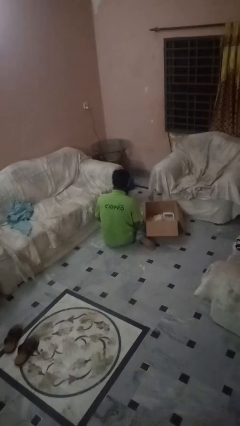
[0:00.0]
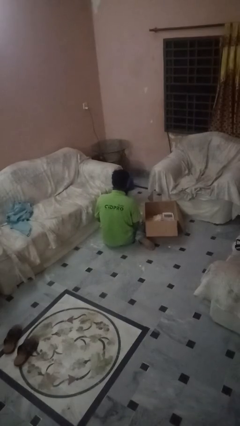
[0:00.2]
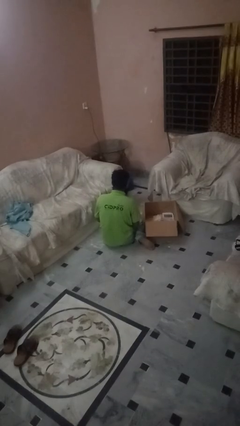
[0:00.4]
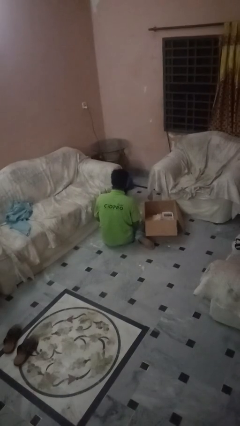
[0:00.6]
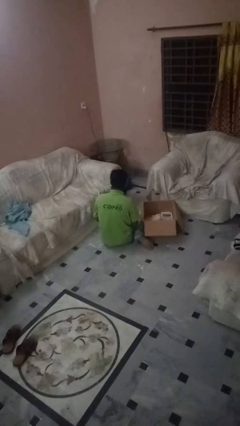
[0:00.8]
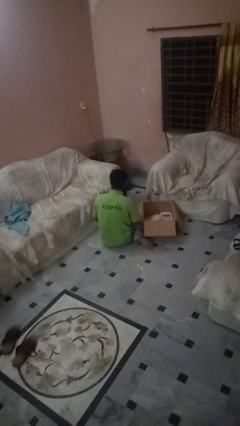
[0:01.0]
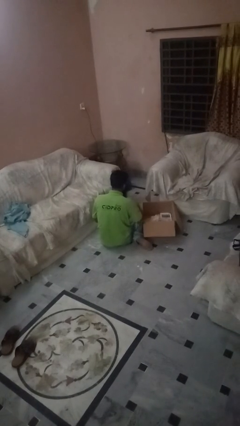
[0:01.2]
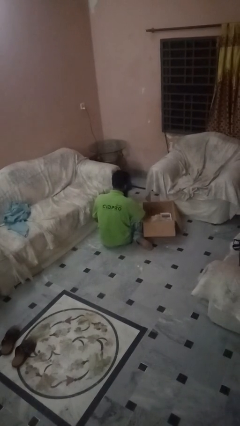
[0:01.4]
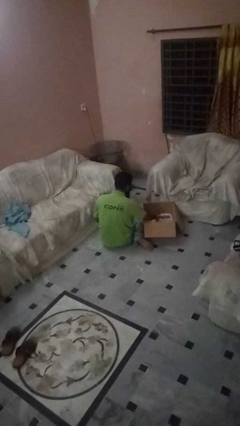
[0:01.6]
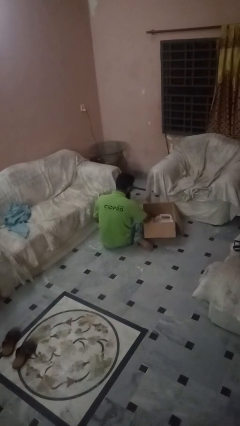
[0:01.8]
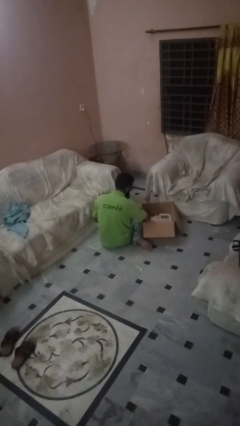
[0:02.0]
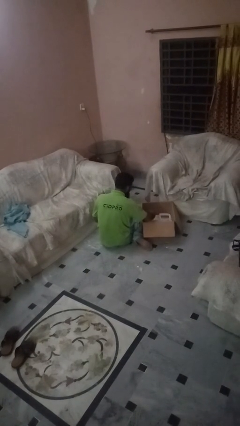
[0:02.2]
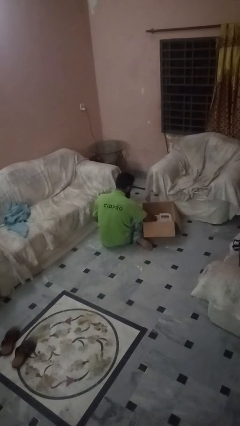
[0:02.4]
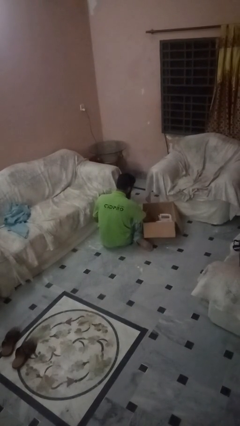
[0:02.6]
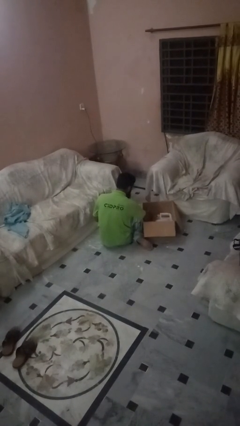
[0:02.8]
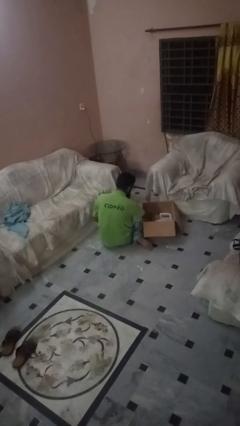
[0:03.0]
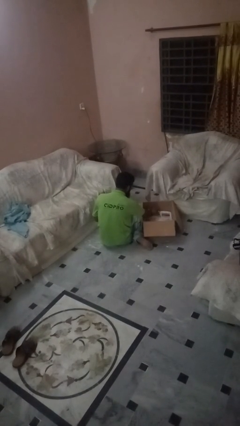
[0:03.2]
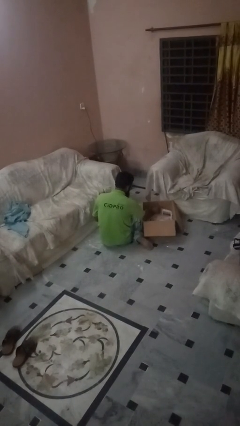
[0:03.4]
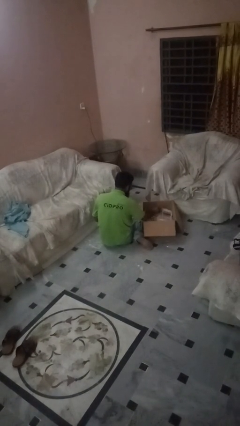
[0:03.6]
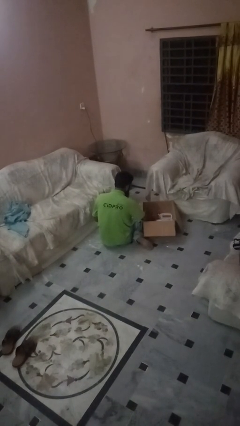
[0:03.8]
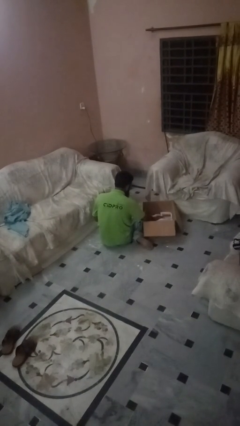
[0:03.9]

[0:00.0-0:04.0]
person searches in box

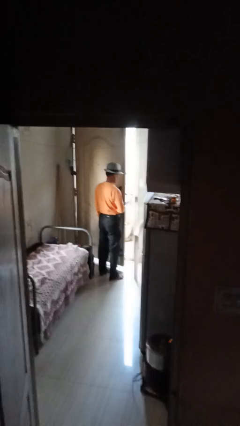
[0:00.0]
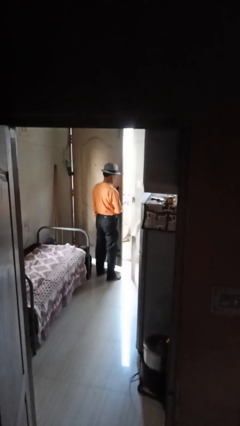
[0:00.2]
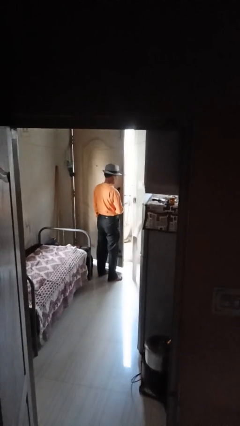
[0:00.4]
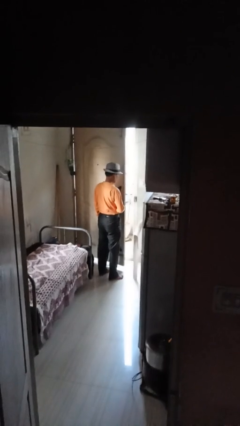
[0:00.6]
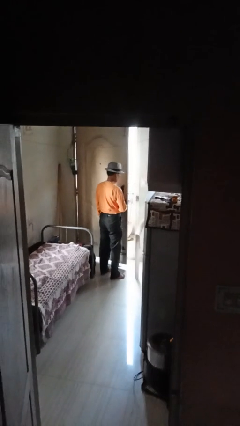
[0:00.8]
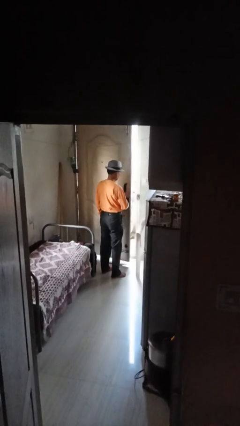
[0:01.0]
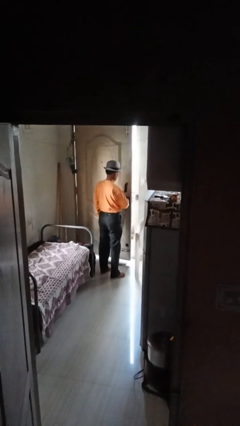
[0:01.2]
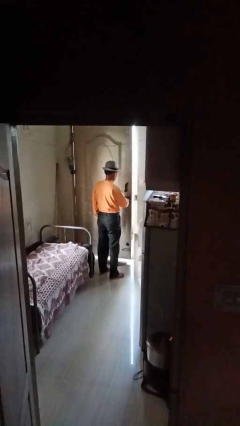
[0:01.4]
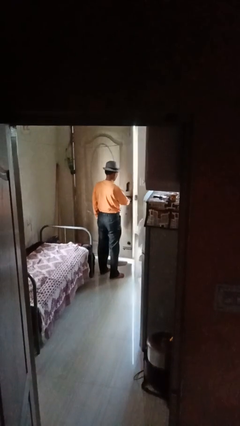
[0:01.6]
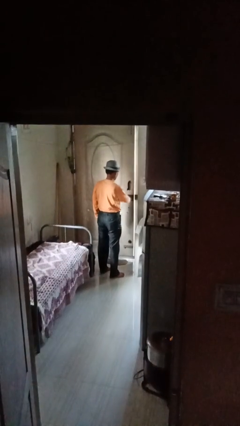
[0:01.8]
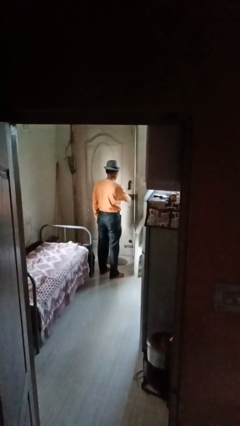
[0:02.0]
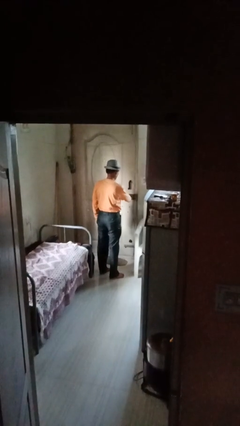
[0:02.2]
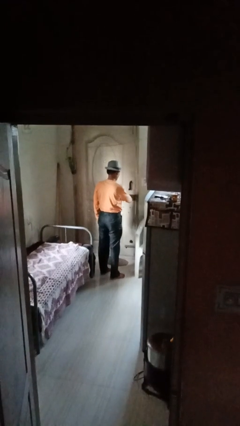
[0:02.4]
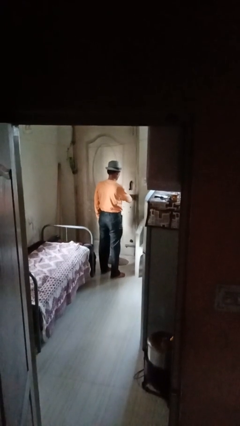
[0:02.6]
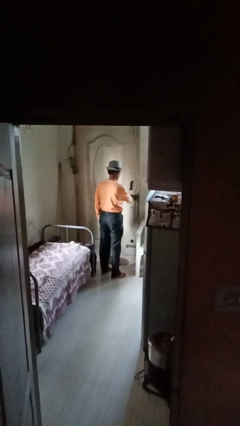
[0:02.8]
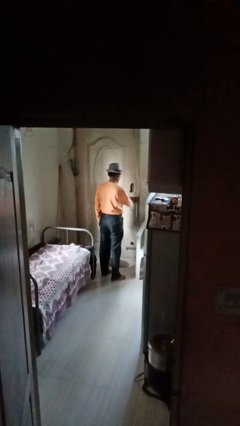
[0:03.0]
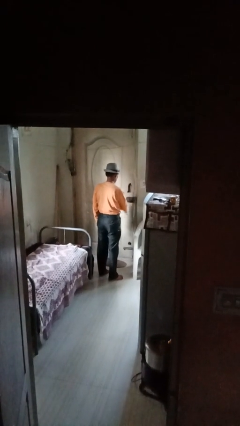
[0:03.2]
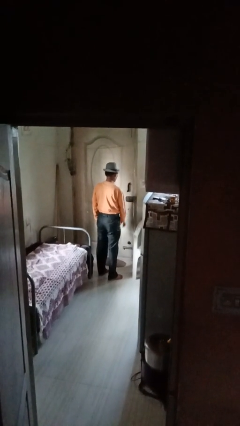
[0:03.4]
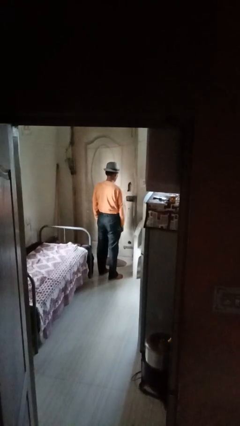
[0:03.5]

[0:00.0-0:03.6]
person closes facility door

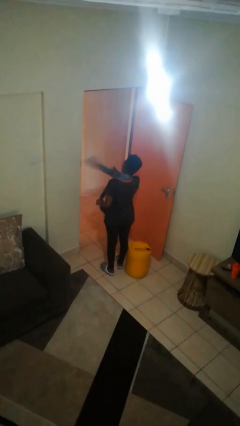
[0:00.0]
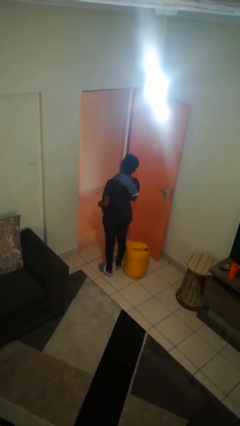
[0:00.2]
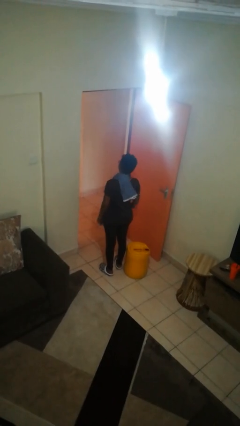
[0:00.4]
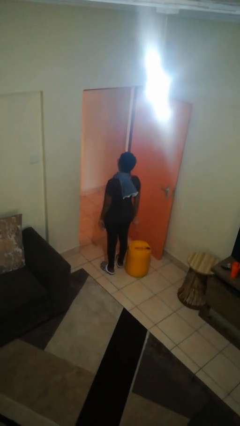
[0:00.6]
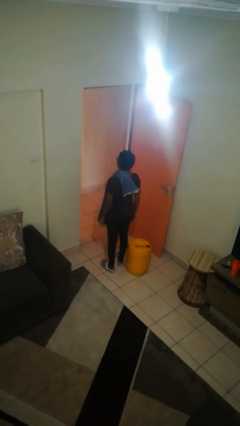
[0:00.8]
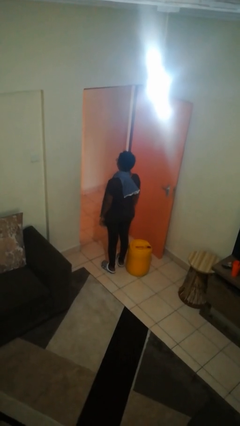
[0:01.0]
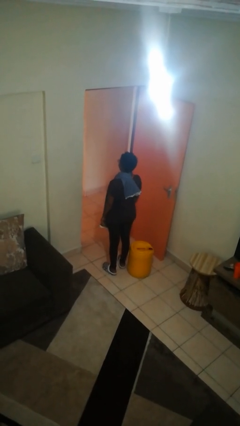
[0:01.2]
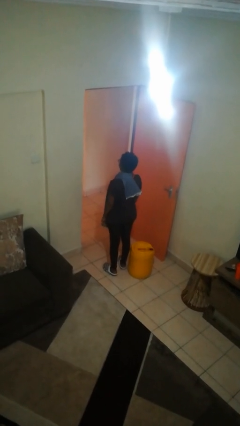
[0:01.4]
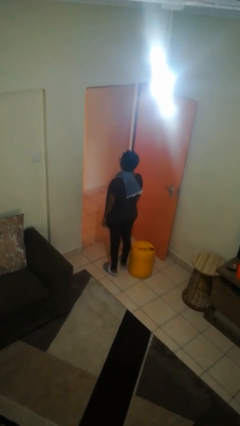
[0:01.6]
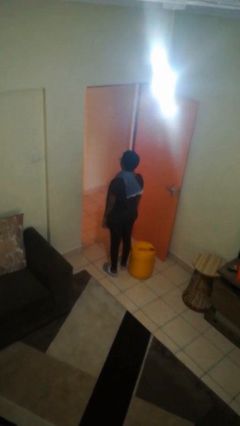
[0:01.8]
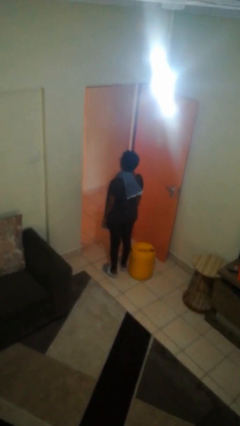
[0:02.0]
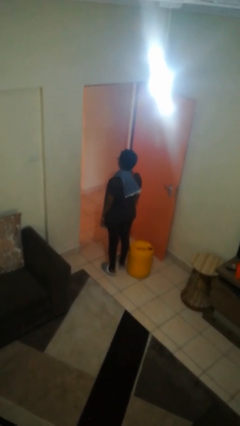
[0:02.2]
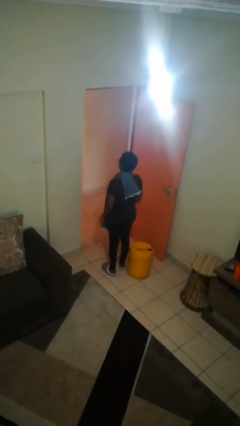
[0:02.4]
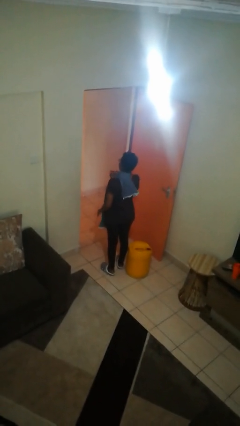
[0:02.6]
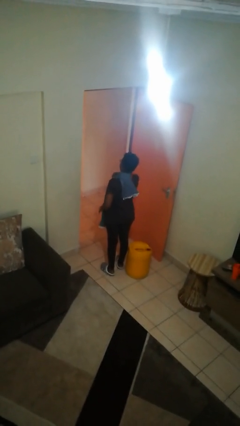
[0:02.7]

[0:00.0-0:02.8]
person puts on scarf

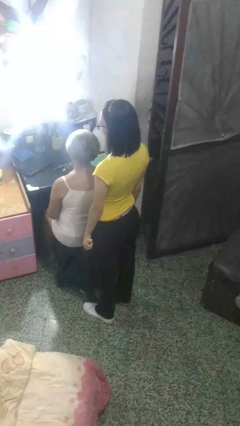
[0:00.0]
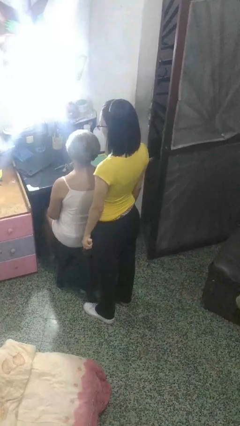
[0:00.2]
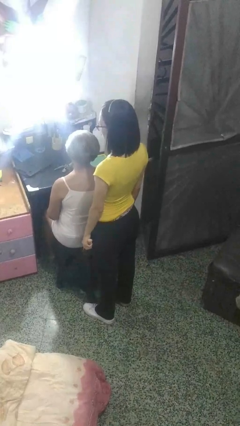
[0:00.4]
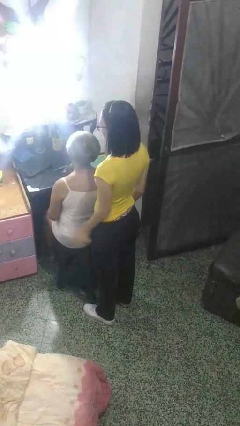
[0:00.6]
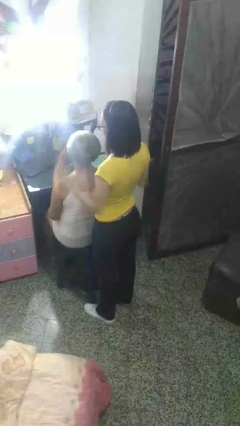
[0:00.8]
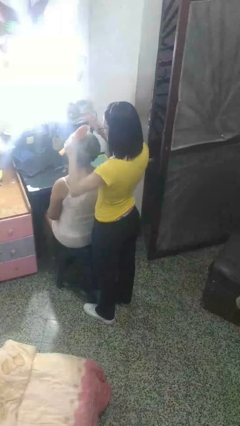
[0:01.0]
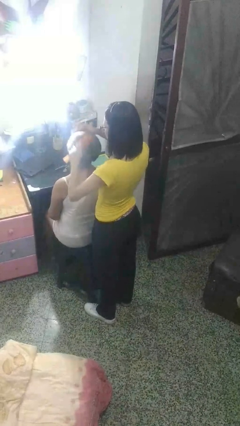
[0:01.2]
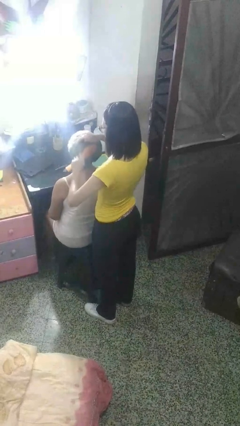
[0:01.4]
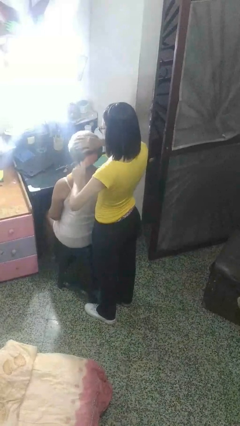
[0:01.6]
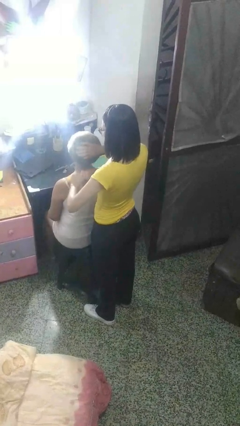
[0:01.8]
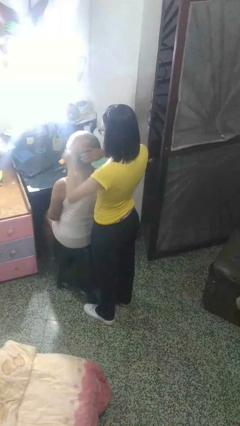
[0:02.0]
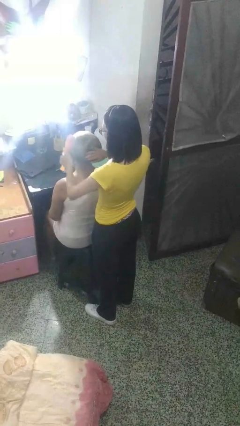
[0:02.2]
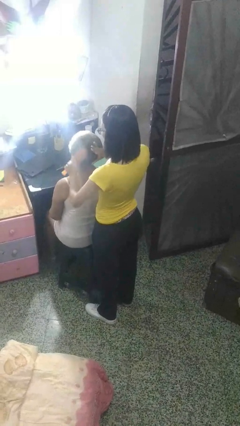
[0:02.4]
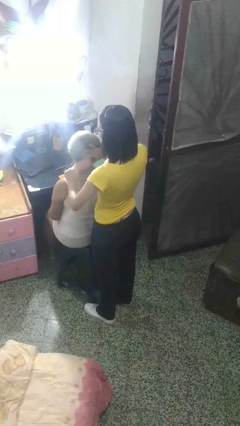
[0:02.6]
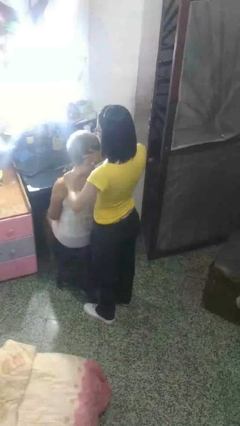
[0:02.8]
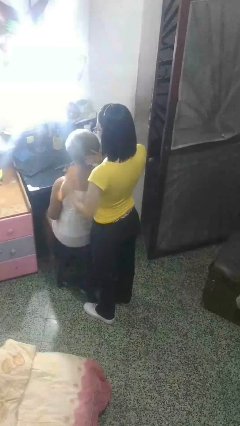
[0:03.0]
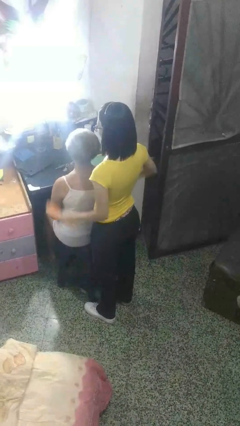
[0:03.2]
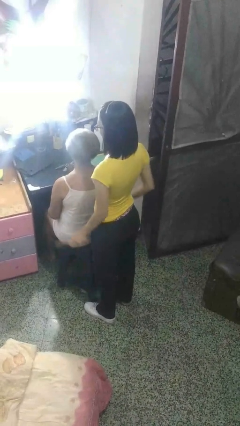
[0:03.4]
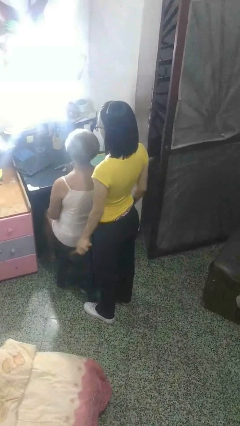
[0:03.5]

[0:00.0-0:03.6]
person brushes hair of person

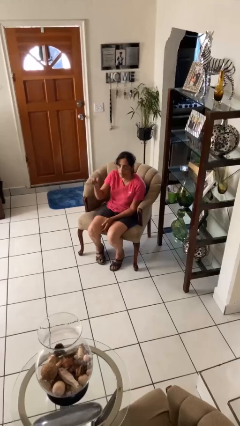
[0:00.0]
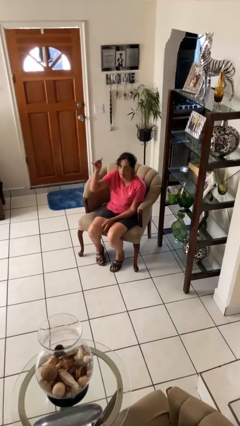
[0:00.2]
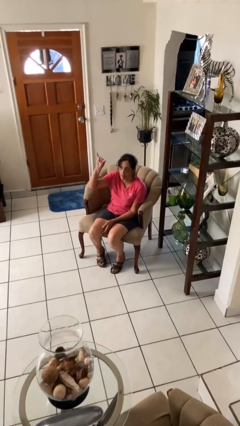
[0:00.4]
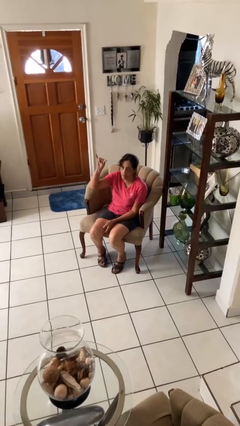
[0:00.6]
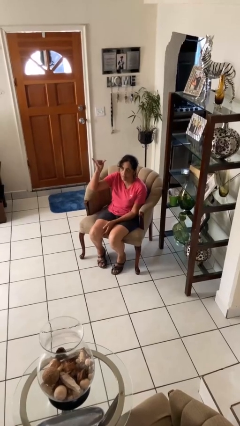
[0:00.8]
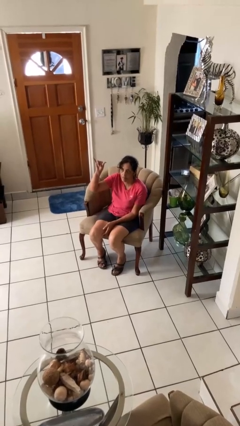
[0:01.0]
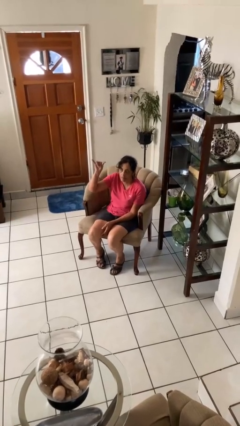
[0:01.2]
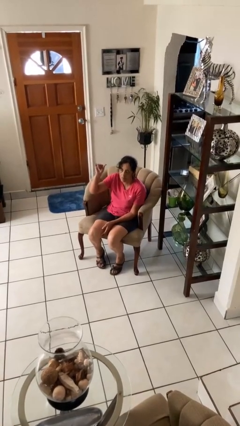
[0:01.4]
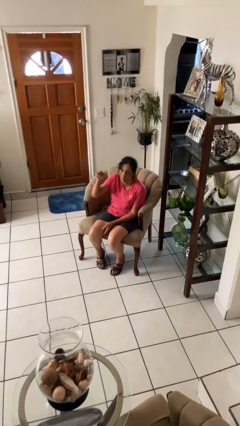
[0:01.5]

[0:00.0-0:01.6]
person gestures hang loose

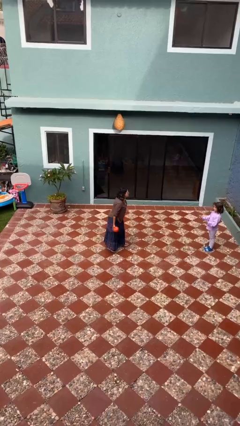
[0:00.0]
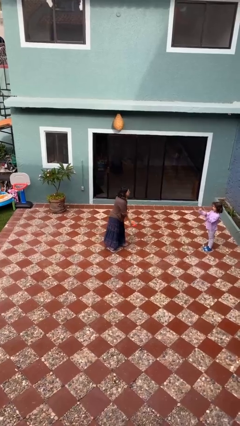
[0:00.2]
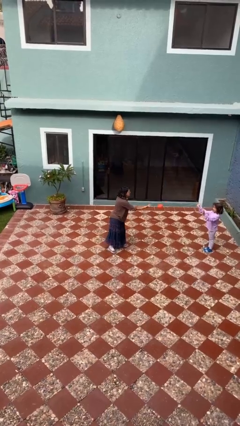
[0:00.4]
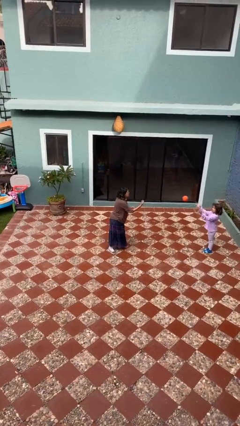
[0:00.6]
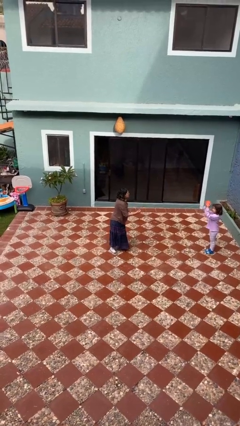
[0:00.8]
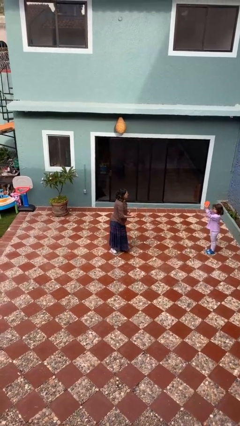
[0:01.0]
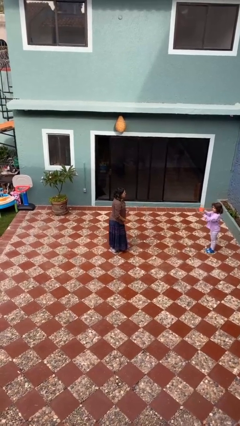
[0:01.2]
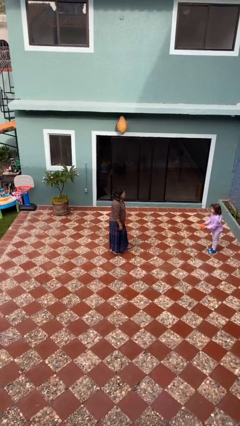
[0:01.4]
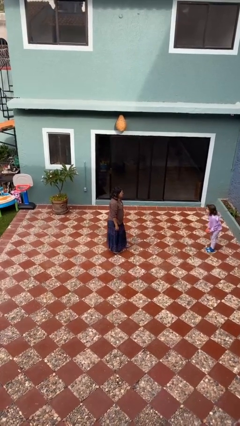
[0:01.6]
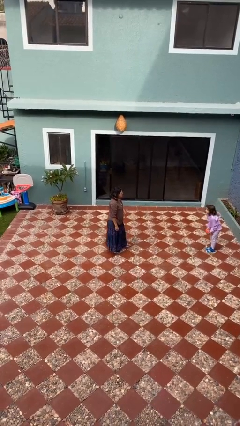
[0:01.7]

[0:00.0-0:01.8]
person throws object to person
